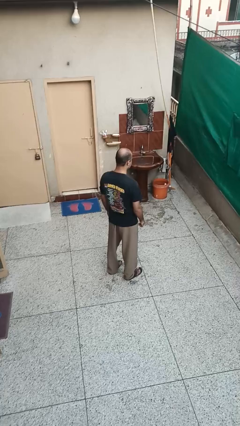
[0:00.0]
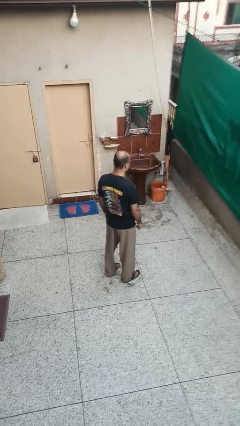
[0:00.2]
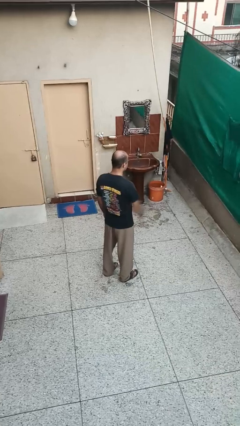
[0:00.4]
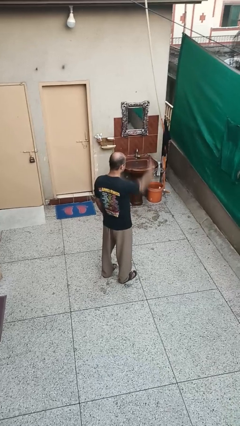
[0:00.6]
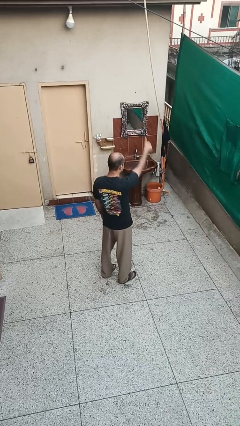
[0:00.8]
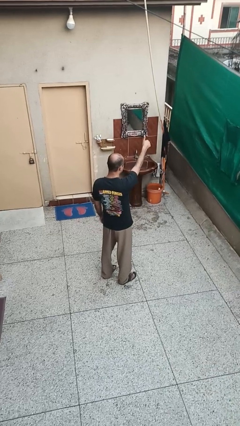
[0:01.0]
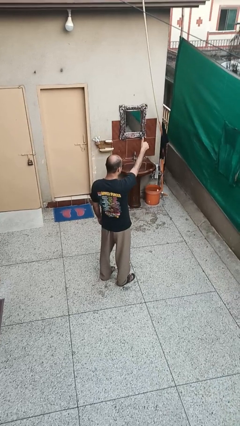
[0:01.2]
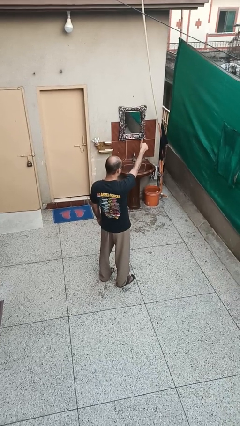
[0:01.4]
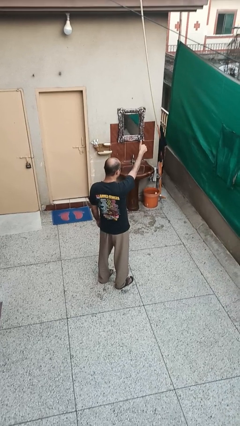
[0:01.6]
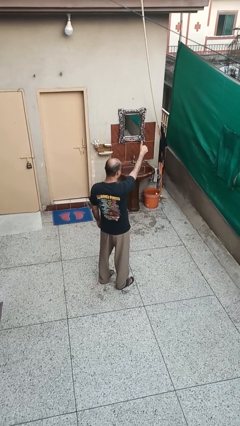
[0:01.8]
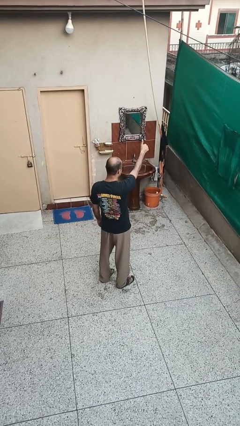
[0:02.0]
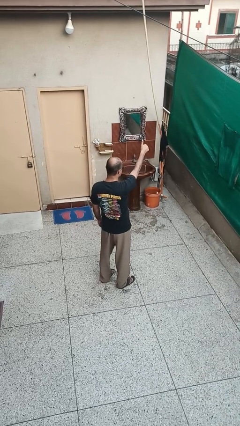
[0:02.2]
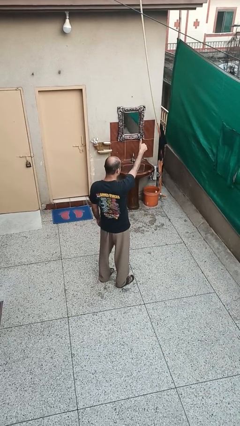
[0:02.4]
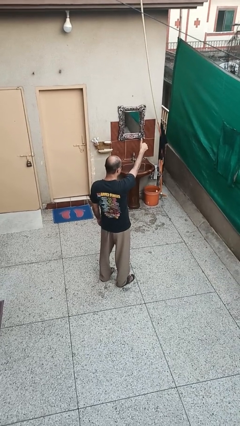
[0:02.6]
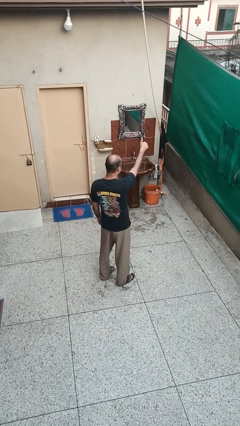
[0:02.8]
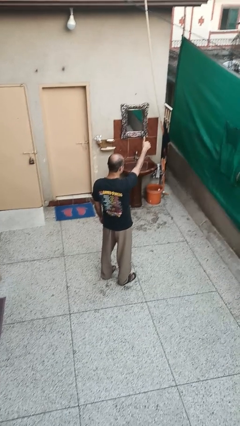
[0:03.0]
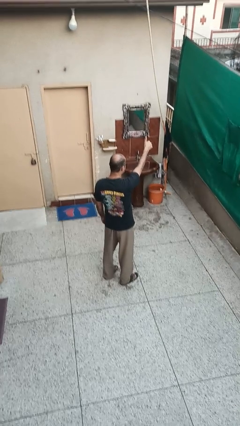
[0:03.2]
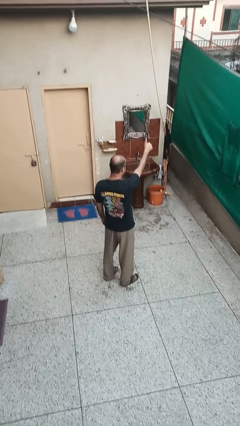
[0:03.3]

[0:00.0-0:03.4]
person gestures thumbs up

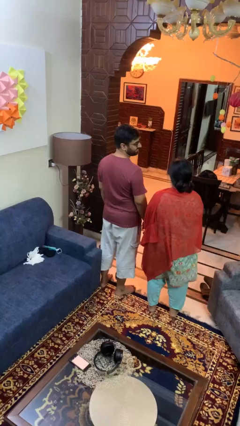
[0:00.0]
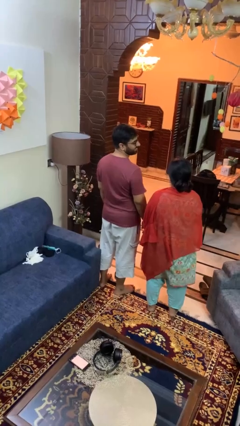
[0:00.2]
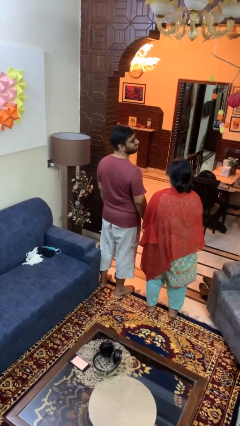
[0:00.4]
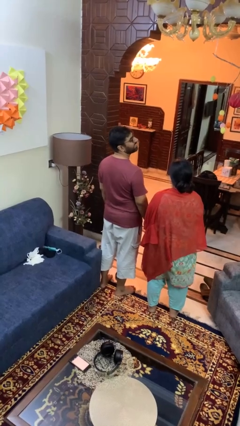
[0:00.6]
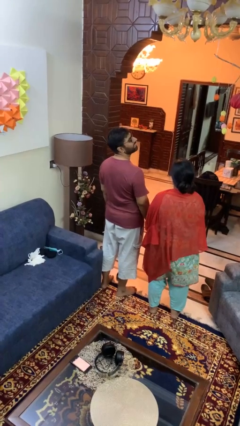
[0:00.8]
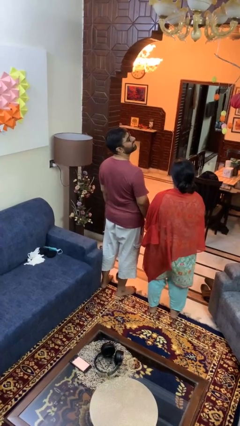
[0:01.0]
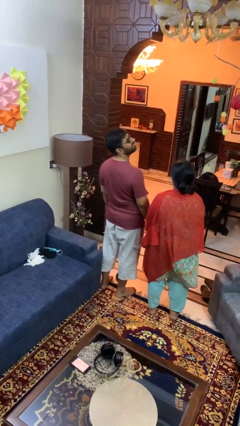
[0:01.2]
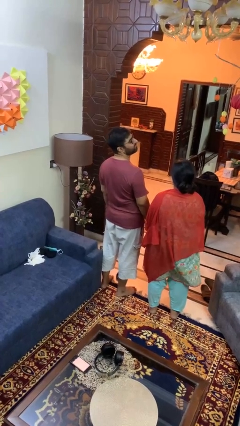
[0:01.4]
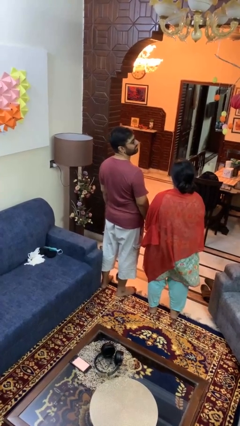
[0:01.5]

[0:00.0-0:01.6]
person laughs with person

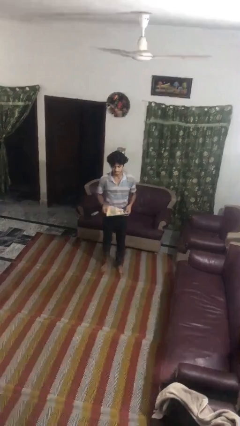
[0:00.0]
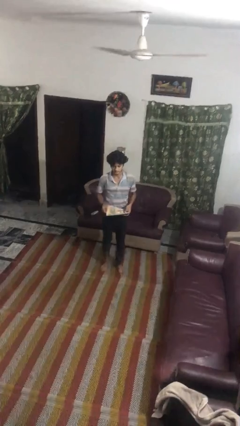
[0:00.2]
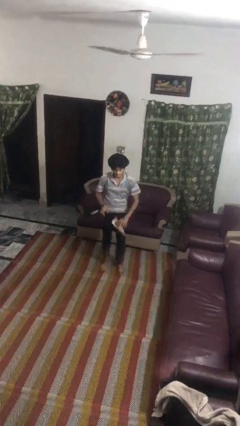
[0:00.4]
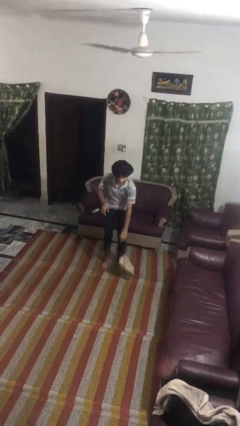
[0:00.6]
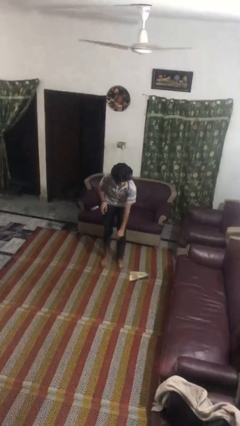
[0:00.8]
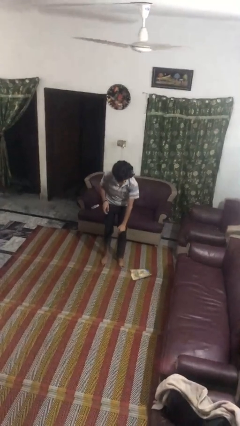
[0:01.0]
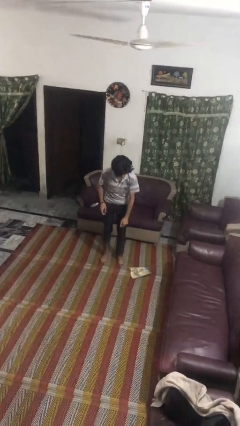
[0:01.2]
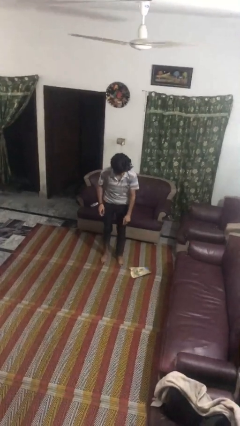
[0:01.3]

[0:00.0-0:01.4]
person drops object

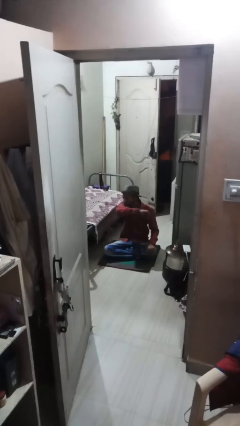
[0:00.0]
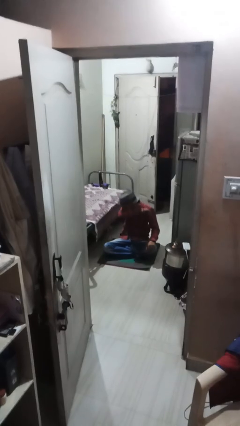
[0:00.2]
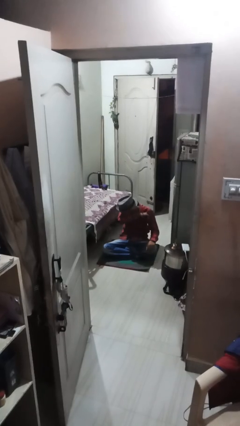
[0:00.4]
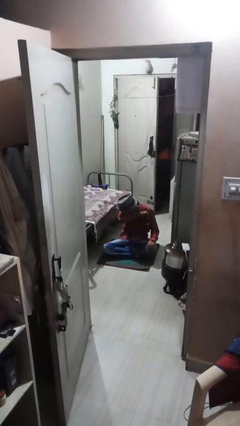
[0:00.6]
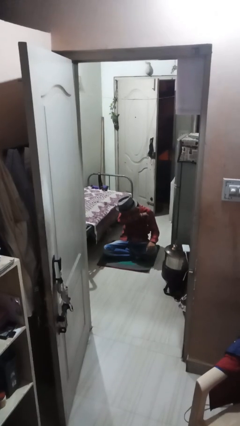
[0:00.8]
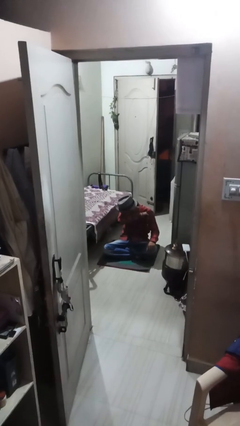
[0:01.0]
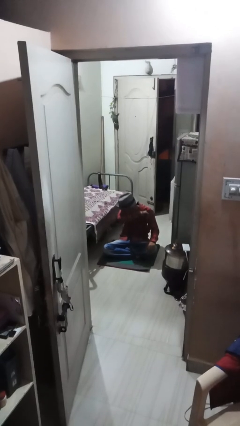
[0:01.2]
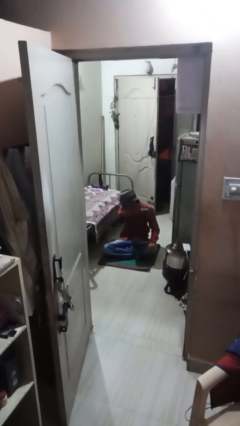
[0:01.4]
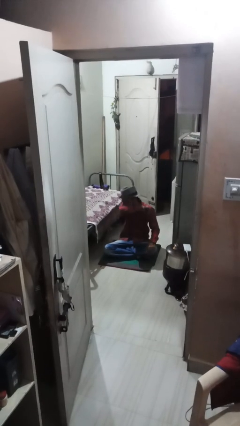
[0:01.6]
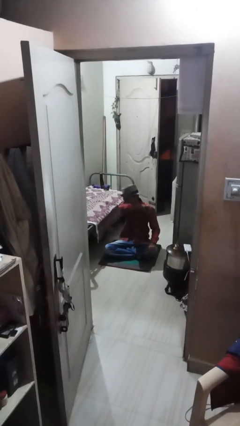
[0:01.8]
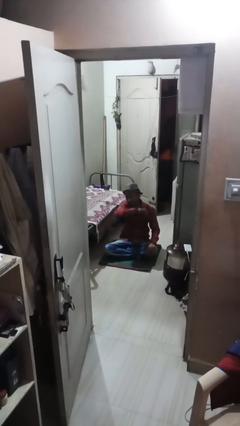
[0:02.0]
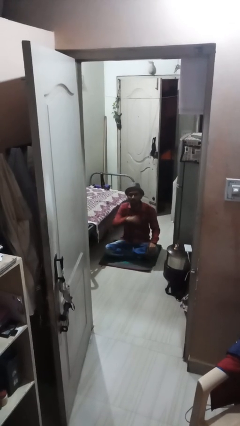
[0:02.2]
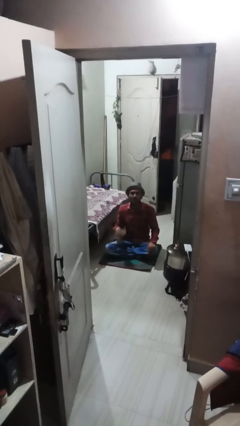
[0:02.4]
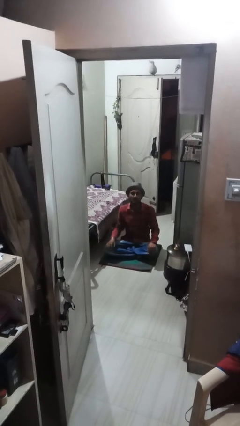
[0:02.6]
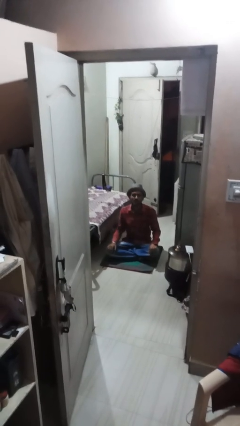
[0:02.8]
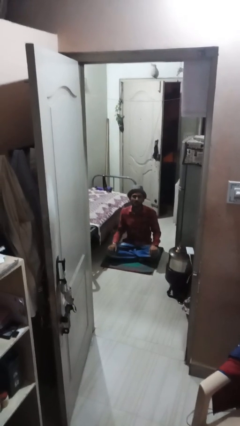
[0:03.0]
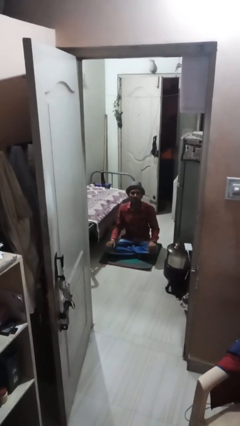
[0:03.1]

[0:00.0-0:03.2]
person sneezes into arm

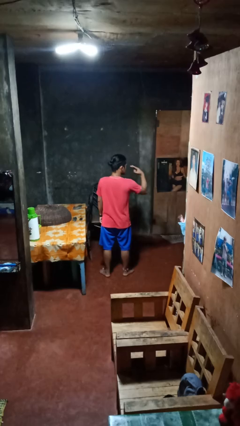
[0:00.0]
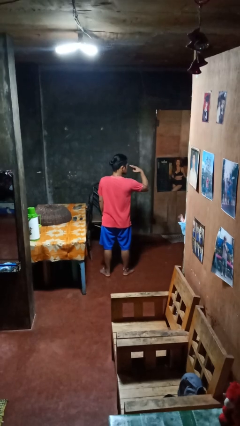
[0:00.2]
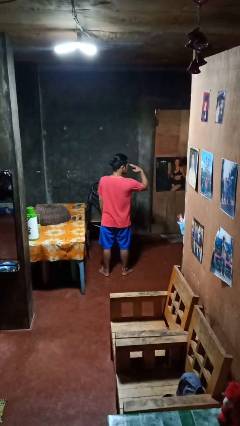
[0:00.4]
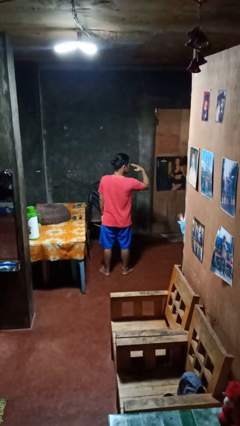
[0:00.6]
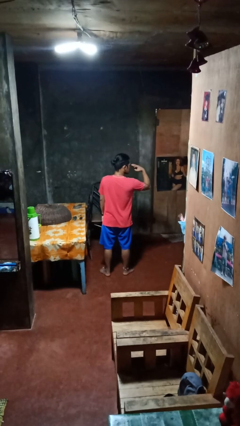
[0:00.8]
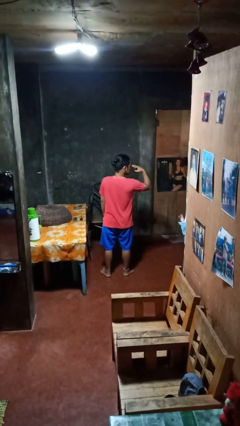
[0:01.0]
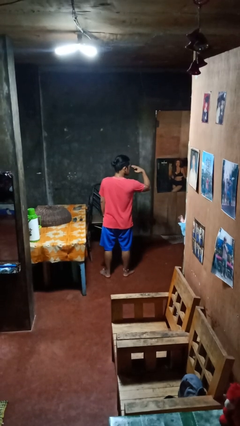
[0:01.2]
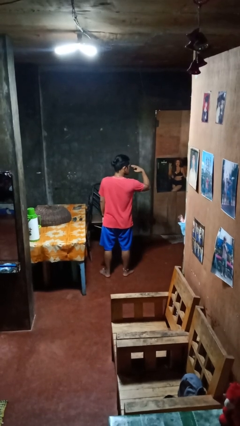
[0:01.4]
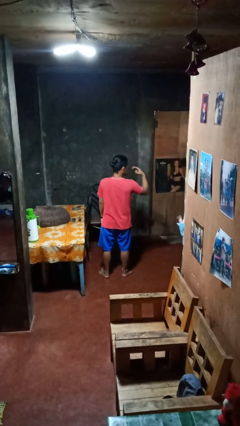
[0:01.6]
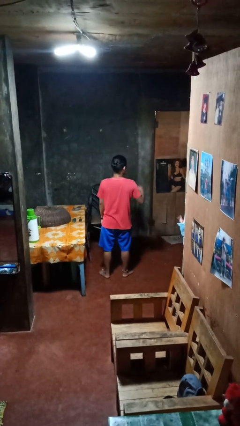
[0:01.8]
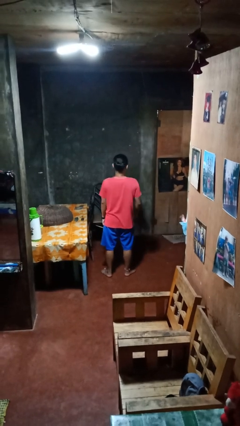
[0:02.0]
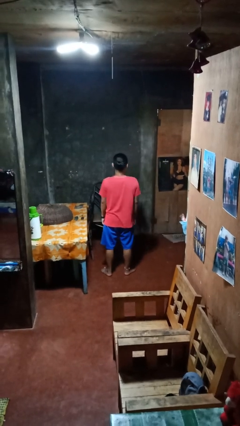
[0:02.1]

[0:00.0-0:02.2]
person gestures watch closely

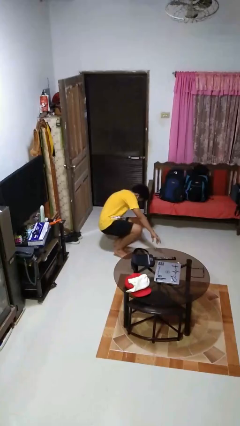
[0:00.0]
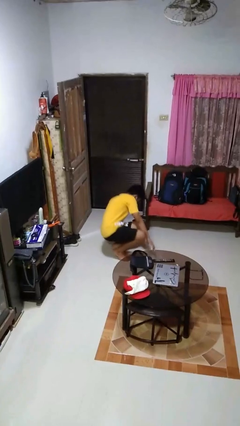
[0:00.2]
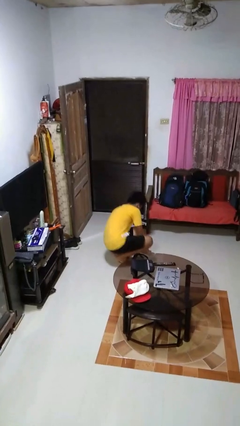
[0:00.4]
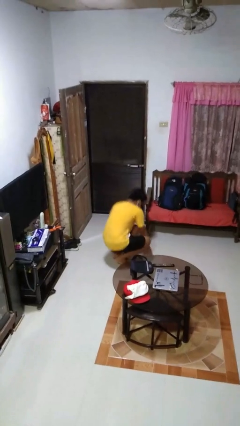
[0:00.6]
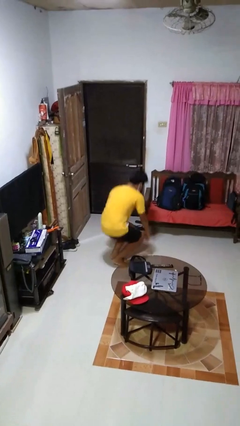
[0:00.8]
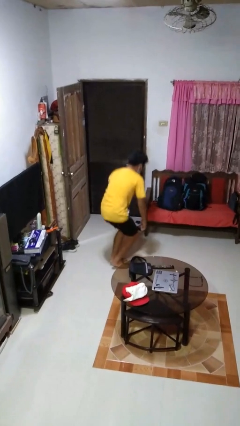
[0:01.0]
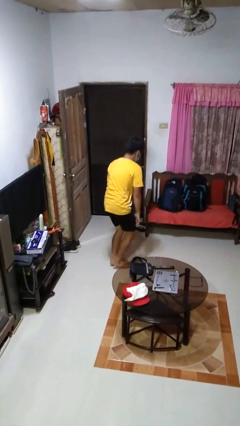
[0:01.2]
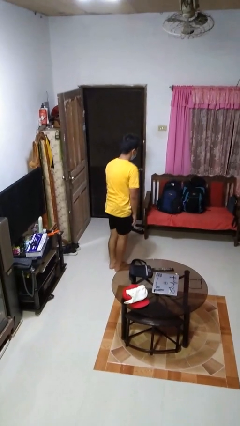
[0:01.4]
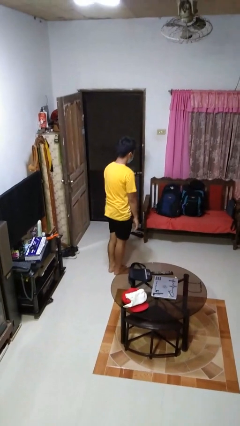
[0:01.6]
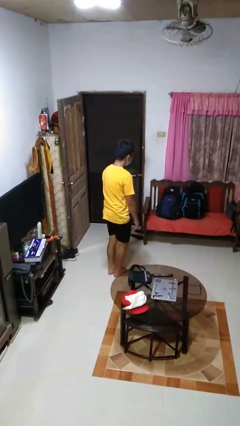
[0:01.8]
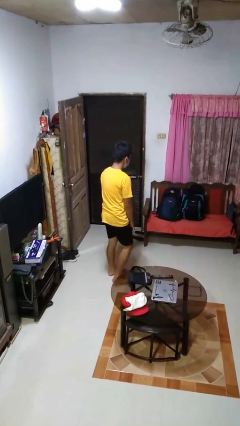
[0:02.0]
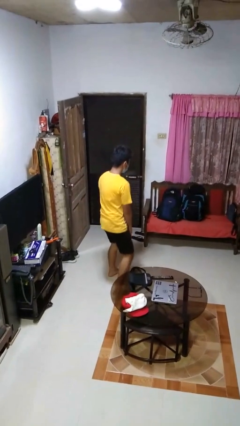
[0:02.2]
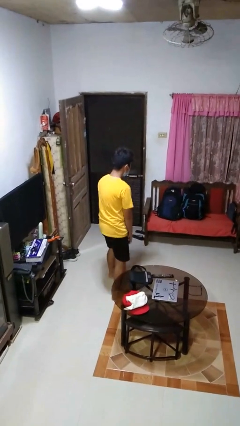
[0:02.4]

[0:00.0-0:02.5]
person stands up from floor

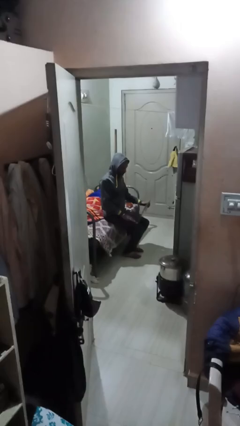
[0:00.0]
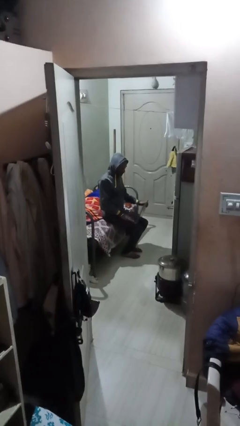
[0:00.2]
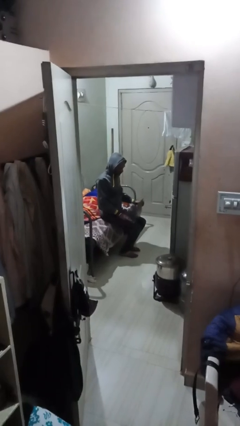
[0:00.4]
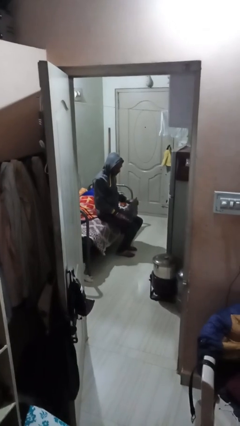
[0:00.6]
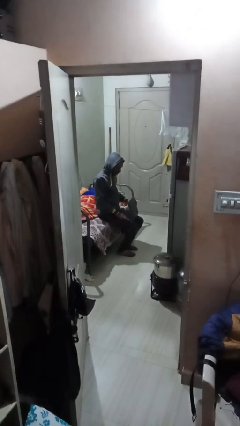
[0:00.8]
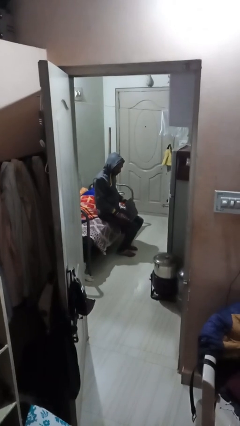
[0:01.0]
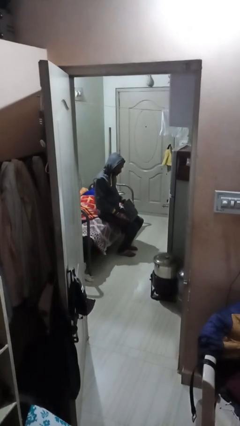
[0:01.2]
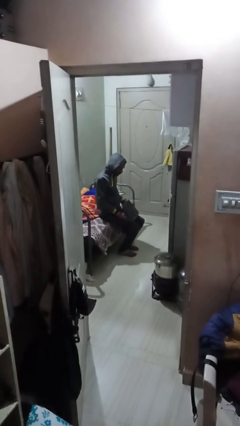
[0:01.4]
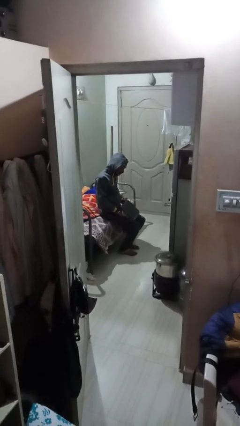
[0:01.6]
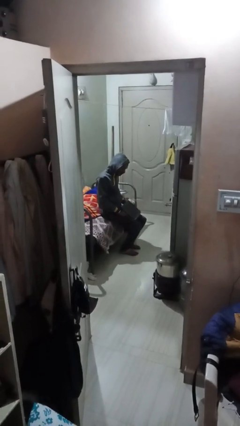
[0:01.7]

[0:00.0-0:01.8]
person interacts with laptop

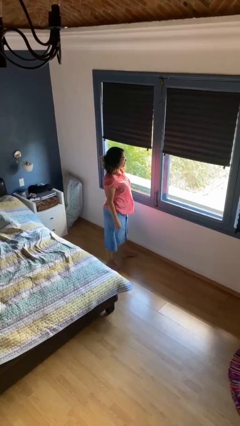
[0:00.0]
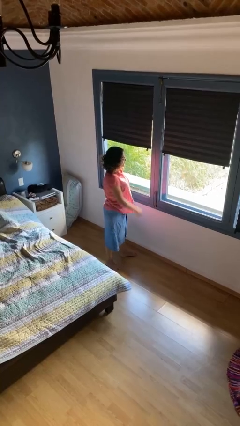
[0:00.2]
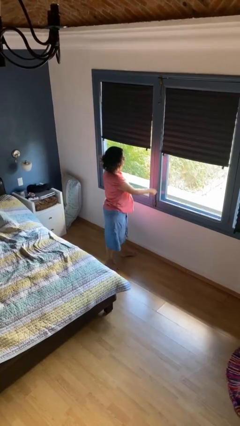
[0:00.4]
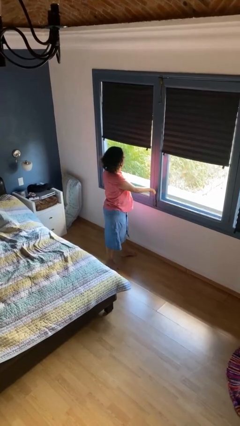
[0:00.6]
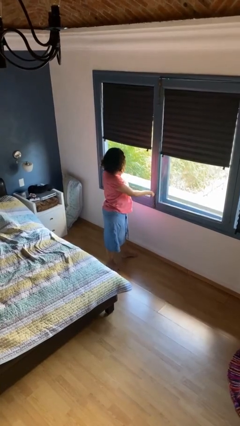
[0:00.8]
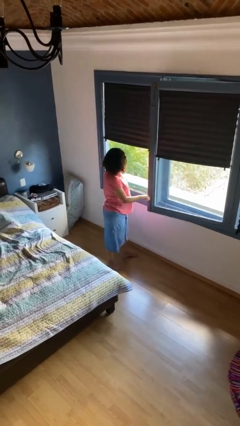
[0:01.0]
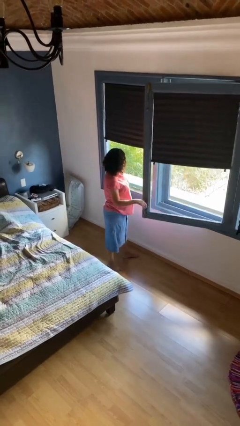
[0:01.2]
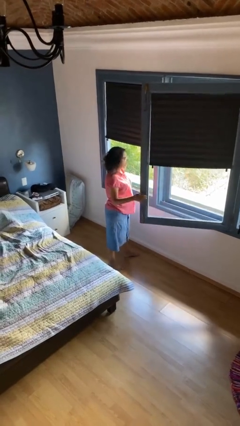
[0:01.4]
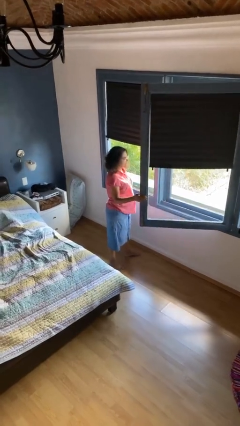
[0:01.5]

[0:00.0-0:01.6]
person opens home window
